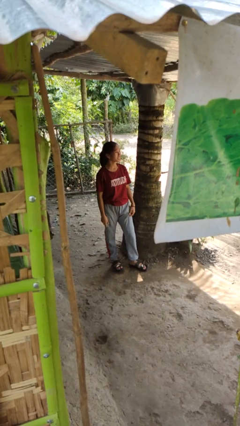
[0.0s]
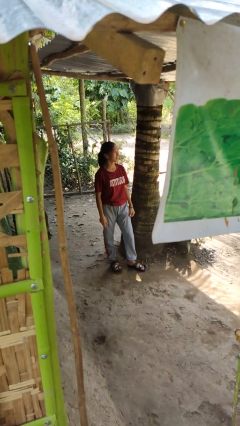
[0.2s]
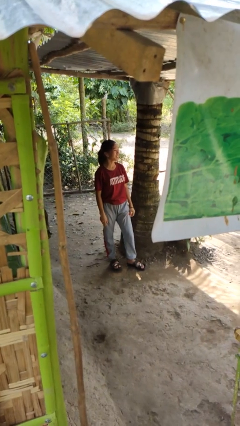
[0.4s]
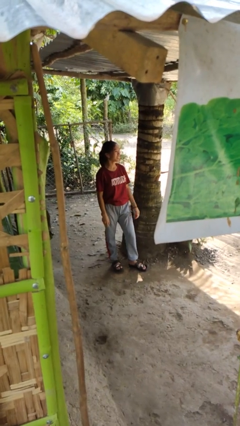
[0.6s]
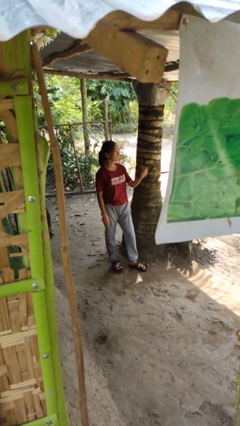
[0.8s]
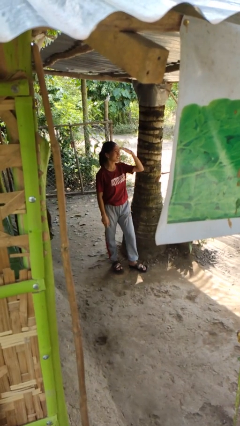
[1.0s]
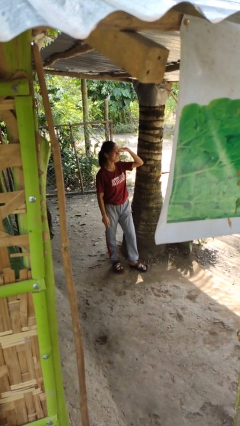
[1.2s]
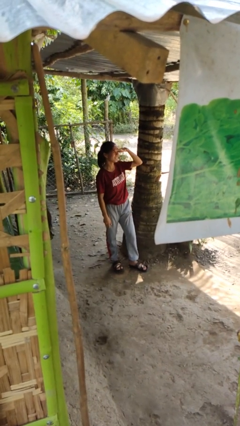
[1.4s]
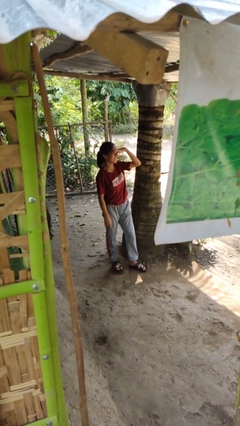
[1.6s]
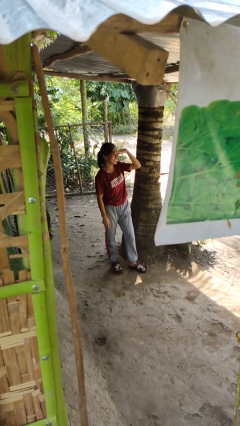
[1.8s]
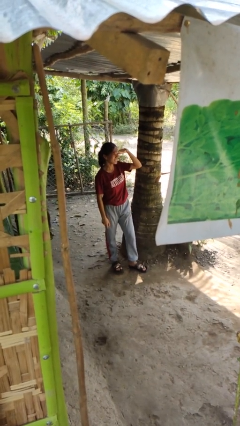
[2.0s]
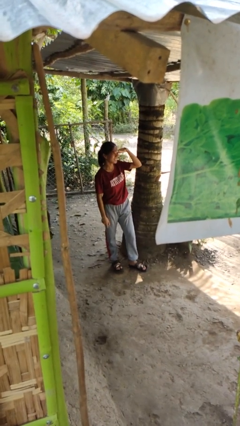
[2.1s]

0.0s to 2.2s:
person shades eyes

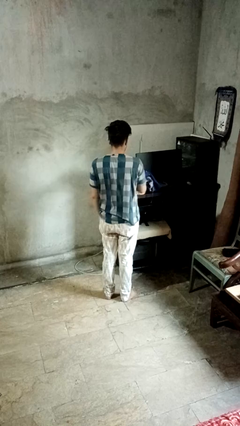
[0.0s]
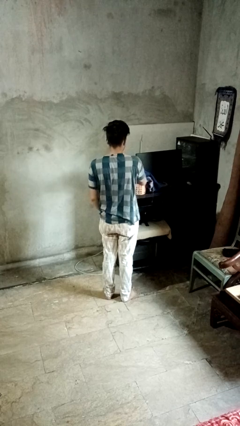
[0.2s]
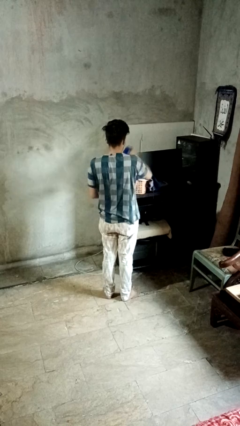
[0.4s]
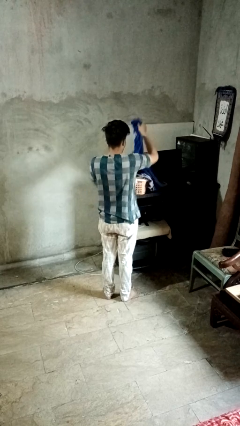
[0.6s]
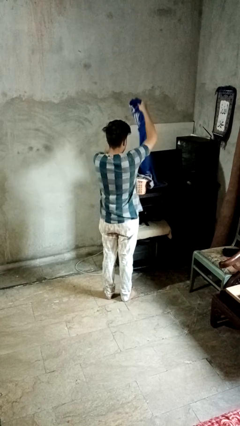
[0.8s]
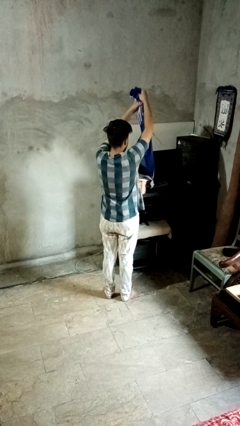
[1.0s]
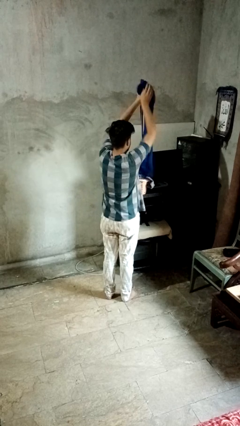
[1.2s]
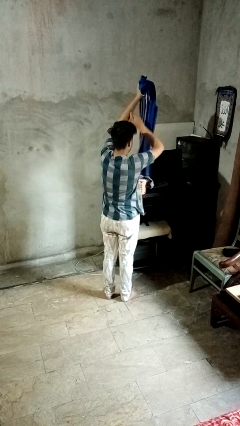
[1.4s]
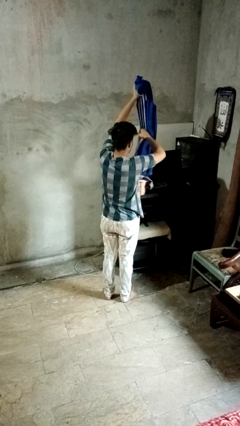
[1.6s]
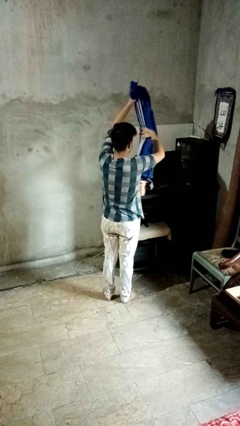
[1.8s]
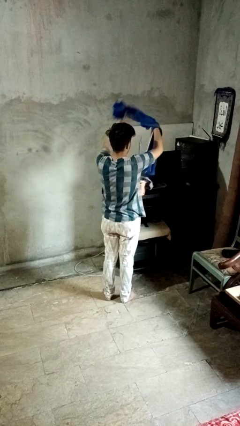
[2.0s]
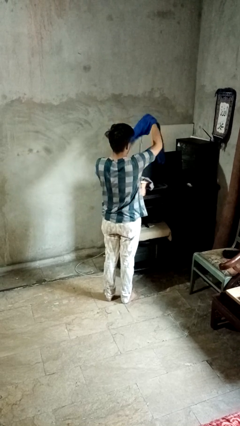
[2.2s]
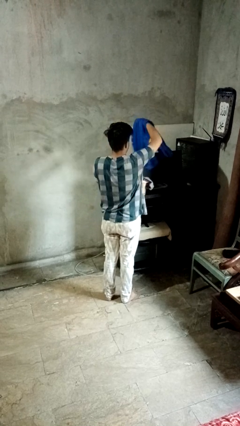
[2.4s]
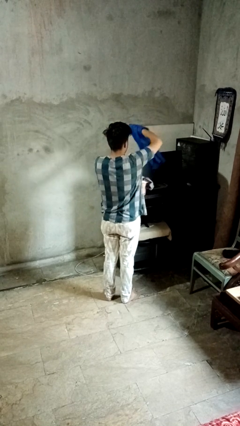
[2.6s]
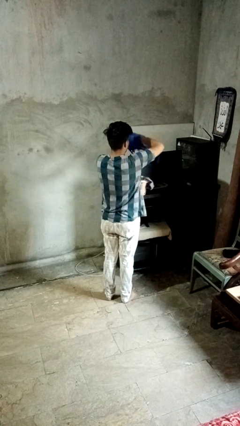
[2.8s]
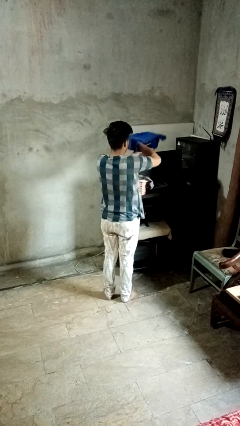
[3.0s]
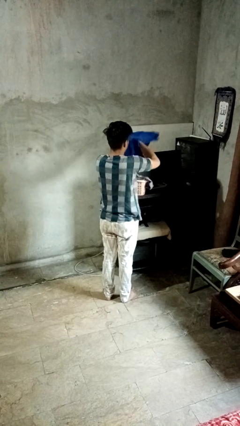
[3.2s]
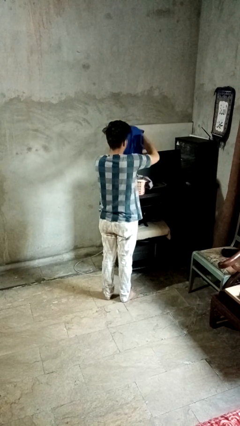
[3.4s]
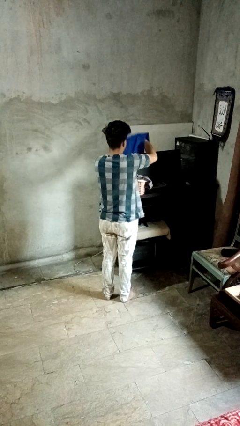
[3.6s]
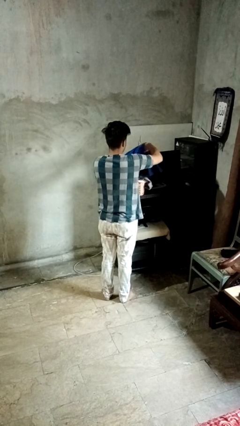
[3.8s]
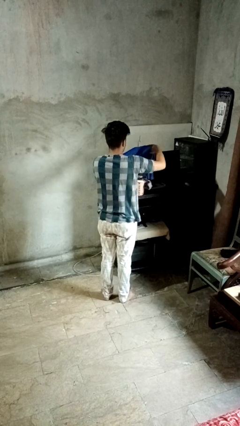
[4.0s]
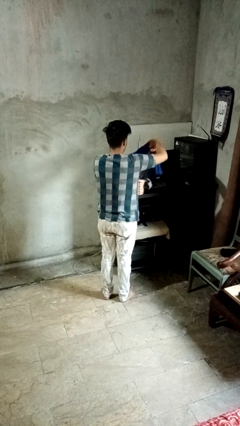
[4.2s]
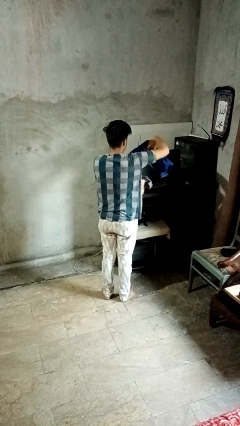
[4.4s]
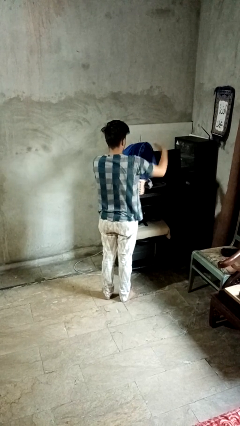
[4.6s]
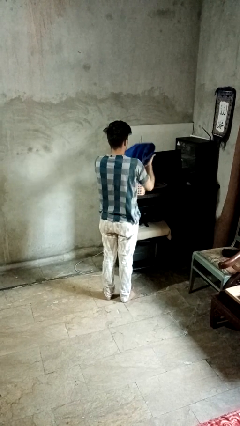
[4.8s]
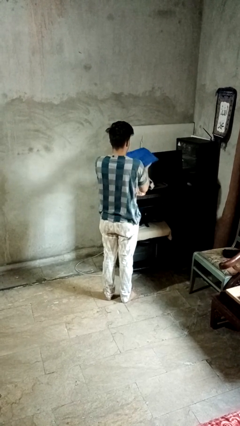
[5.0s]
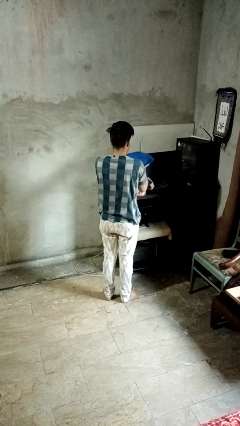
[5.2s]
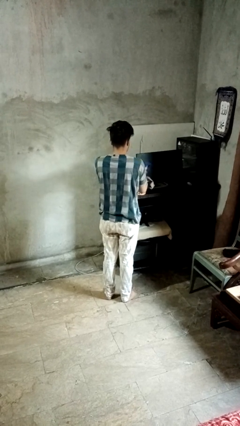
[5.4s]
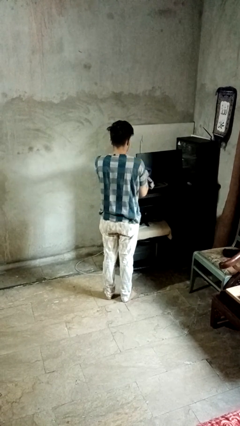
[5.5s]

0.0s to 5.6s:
person folds pants

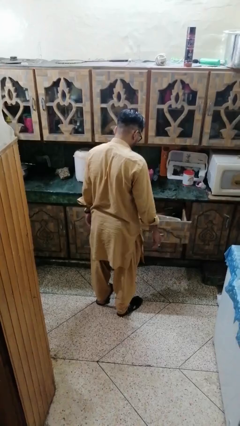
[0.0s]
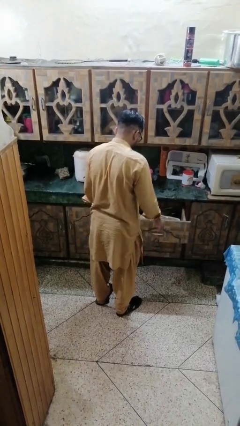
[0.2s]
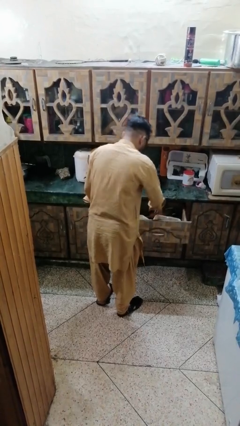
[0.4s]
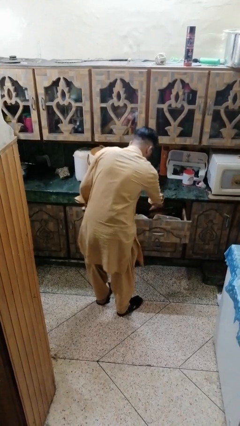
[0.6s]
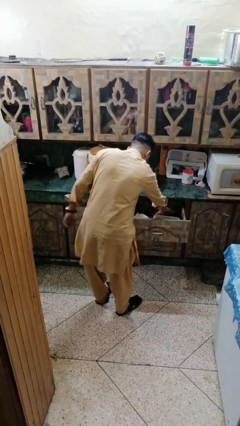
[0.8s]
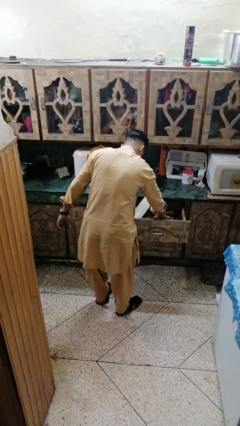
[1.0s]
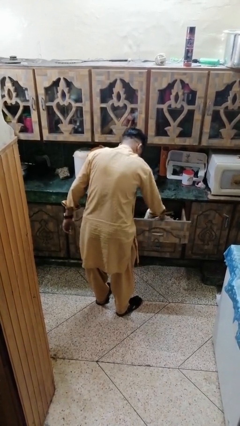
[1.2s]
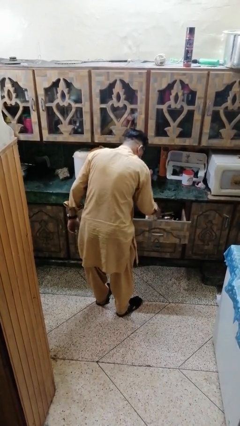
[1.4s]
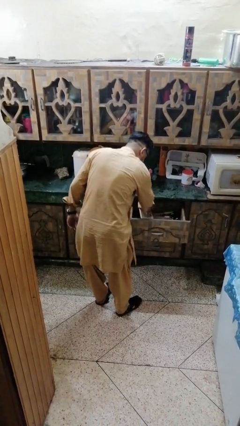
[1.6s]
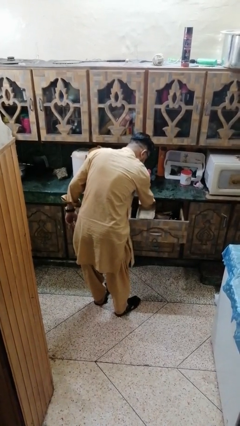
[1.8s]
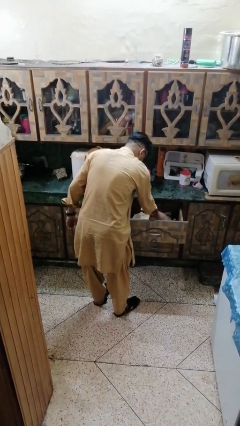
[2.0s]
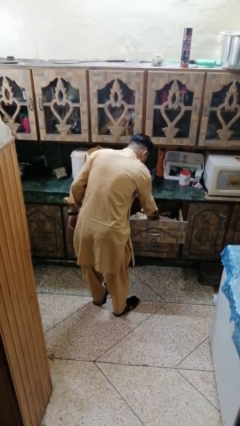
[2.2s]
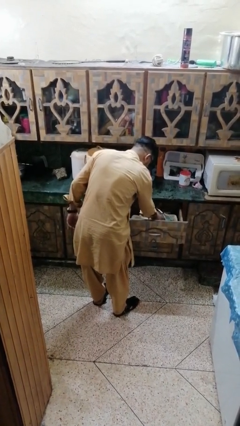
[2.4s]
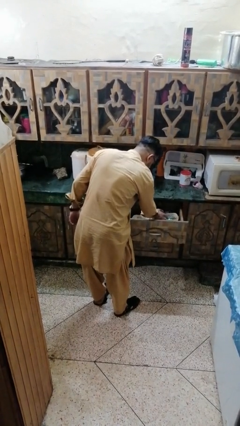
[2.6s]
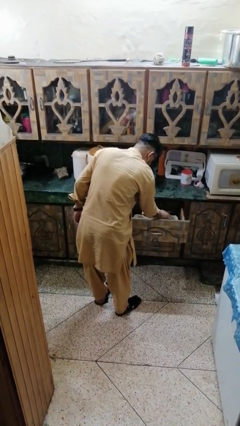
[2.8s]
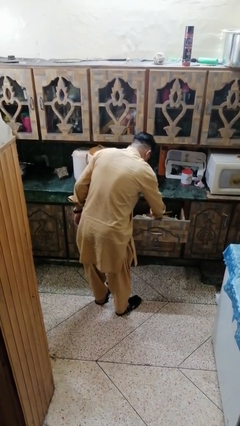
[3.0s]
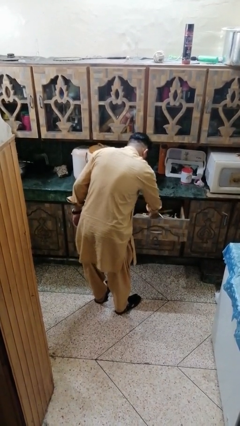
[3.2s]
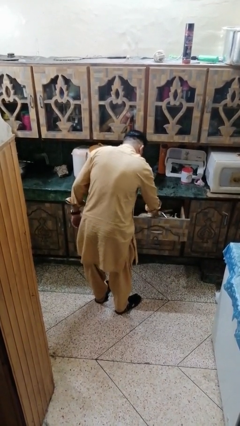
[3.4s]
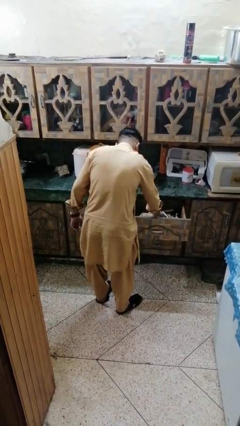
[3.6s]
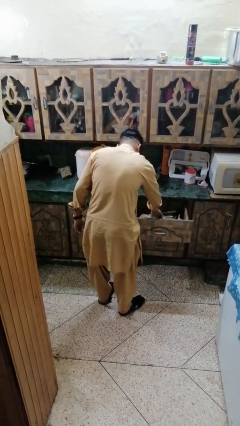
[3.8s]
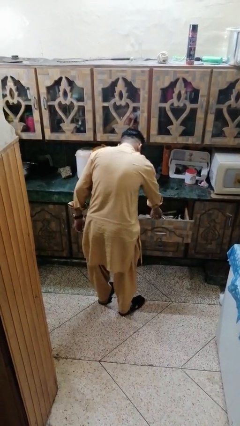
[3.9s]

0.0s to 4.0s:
person searches in kitchen drawer

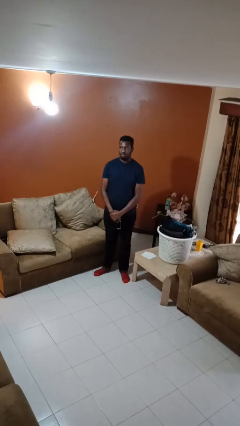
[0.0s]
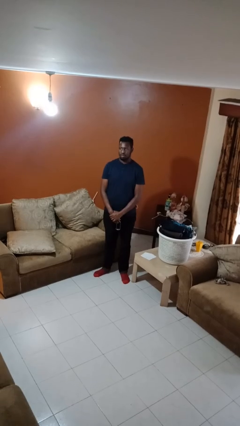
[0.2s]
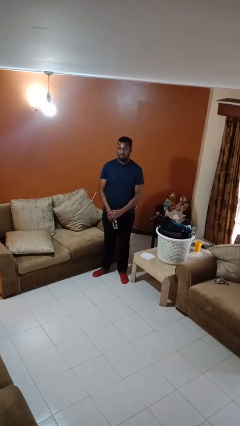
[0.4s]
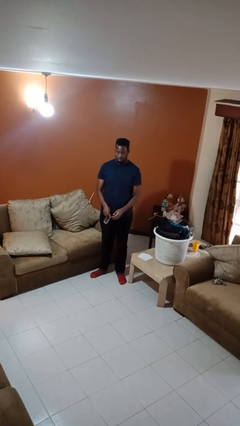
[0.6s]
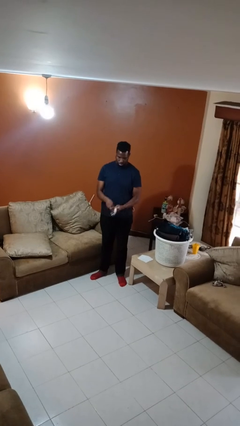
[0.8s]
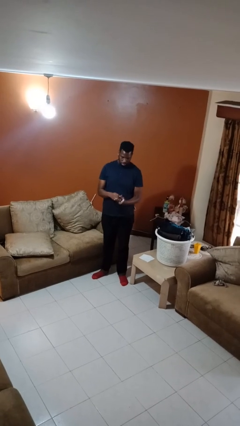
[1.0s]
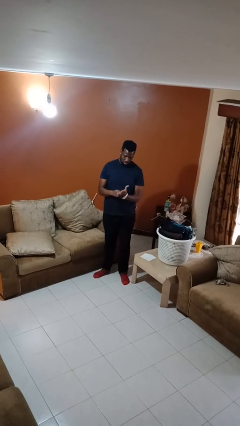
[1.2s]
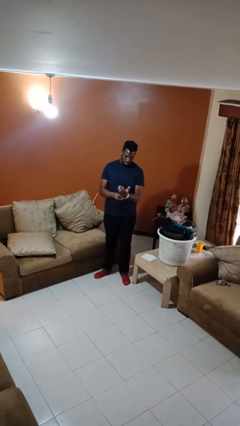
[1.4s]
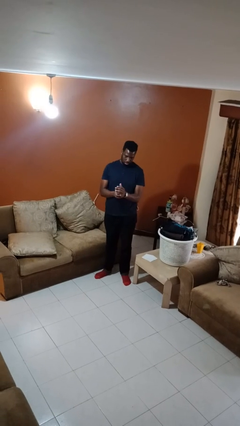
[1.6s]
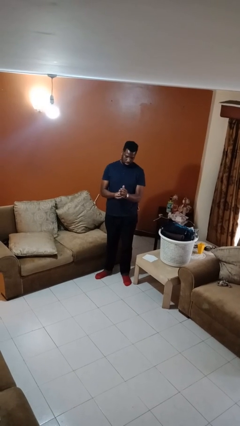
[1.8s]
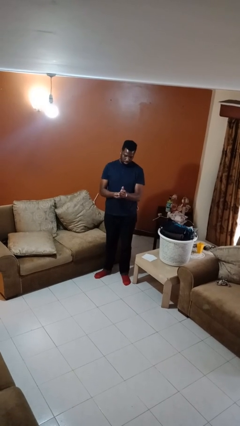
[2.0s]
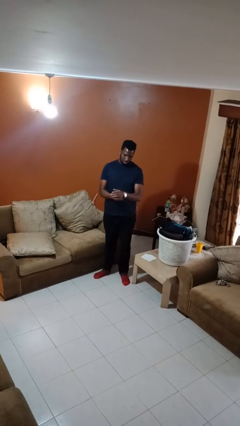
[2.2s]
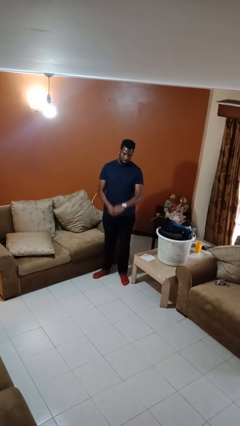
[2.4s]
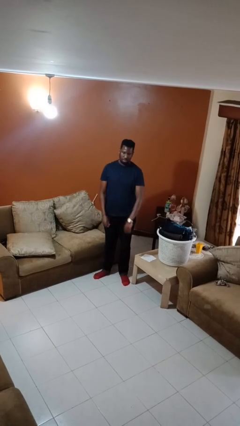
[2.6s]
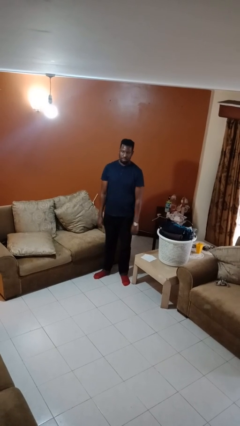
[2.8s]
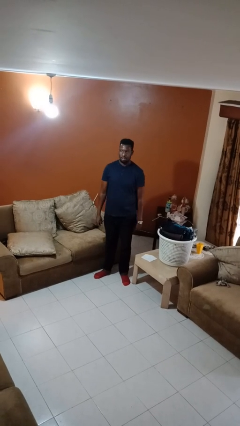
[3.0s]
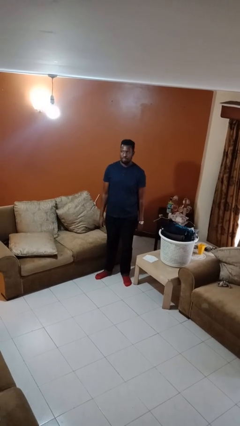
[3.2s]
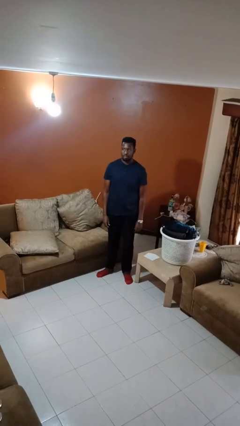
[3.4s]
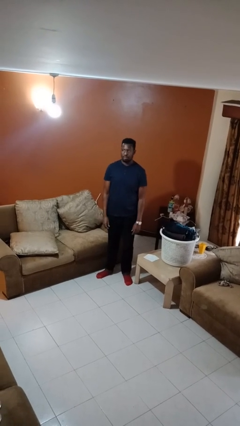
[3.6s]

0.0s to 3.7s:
person puts on wristwatch

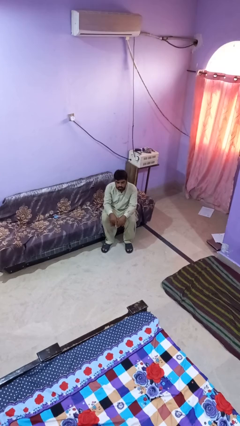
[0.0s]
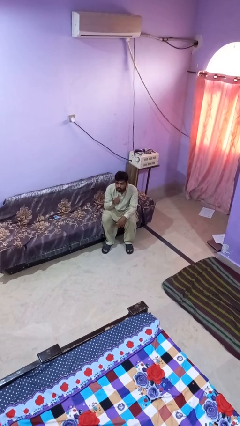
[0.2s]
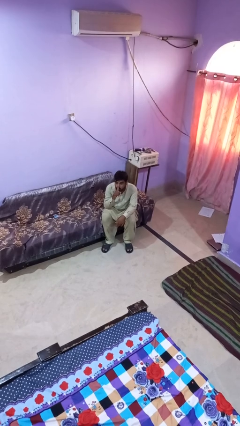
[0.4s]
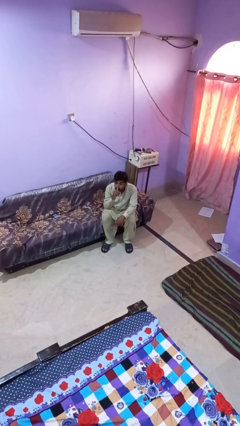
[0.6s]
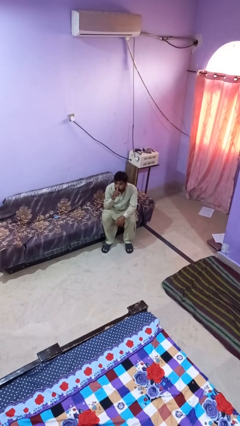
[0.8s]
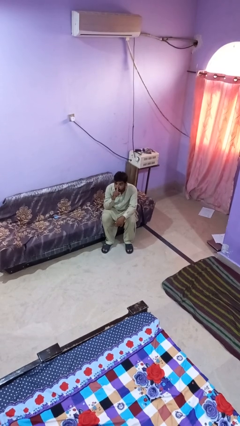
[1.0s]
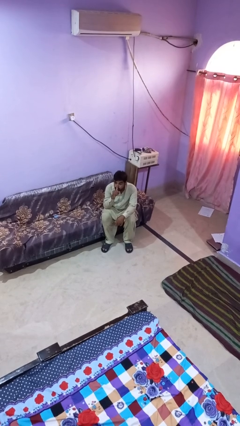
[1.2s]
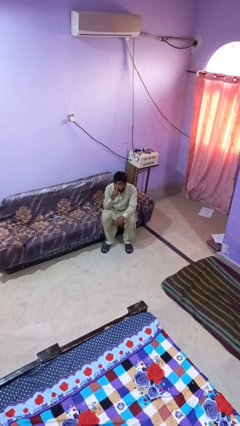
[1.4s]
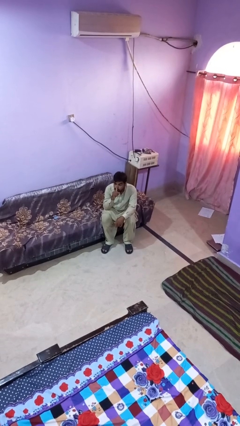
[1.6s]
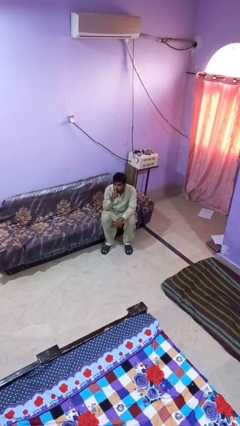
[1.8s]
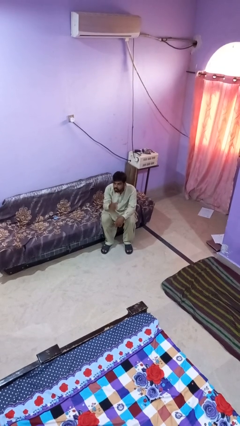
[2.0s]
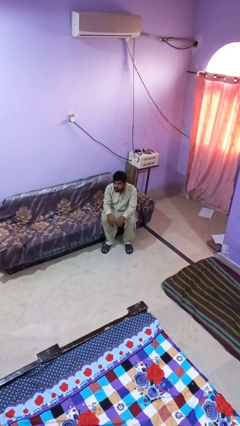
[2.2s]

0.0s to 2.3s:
person gestures be quiet

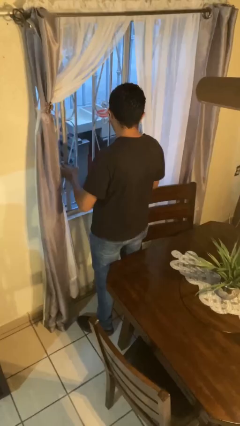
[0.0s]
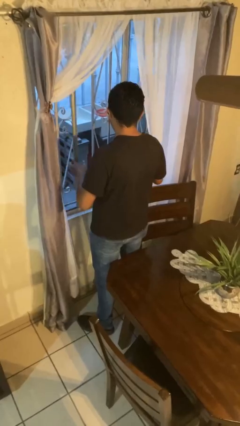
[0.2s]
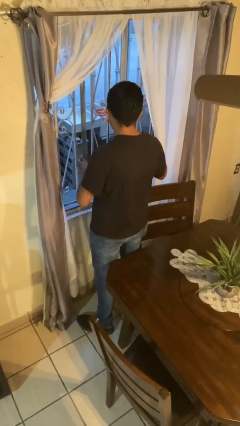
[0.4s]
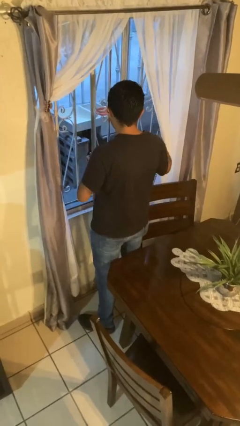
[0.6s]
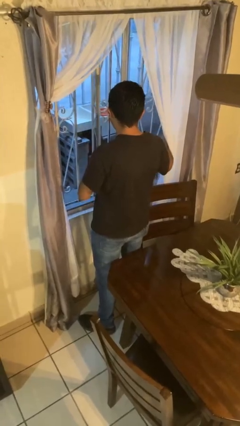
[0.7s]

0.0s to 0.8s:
person opens home window
